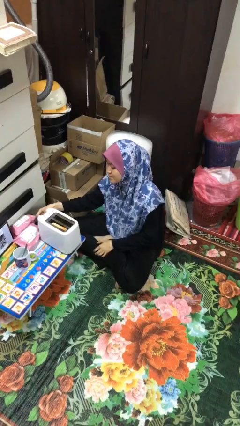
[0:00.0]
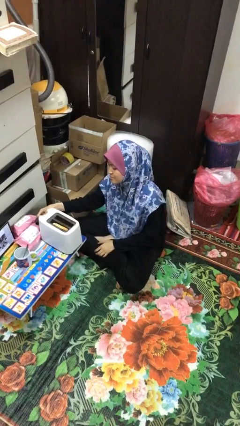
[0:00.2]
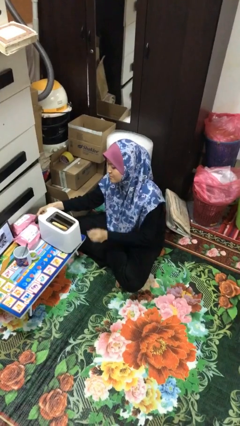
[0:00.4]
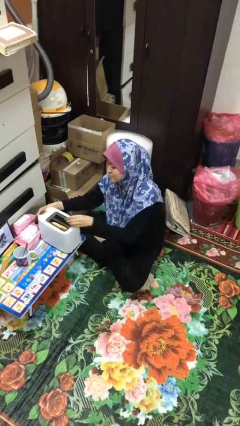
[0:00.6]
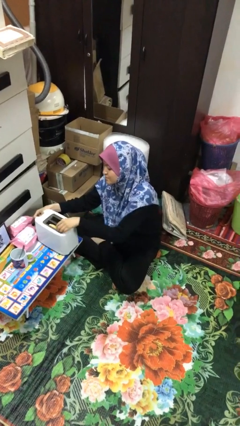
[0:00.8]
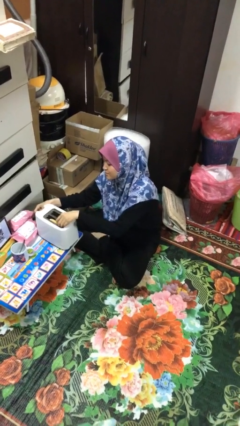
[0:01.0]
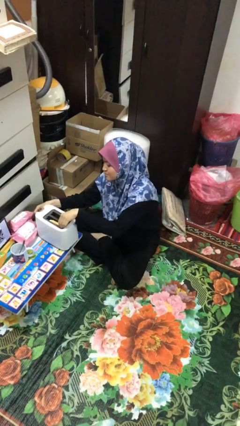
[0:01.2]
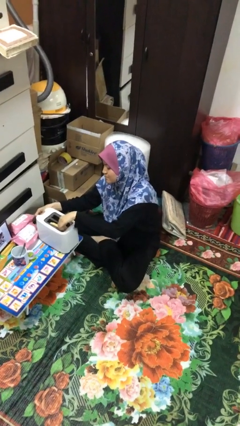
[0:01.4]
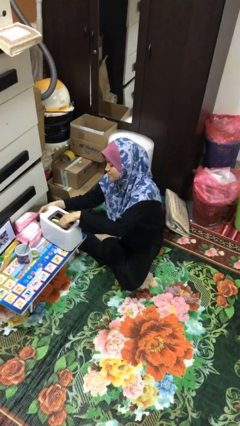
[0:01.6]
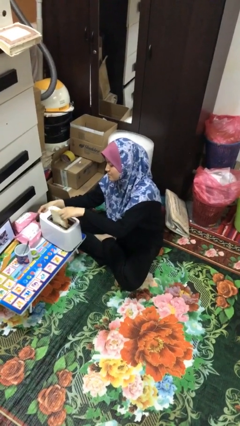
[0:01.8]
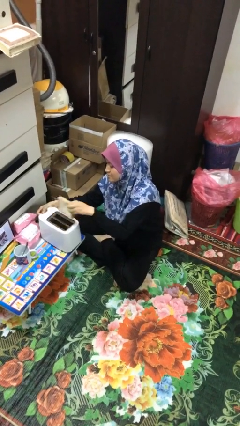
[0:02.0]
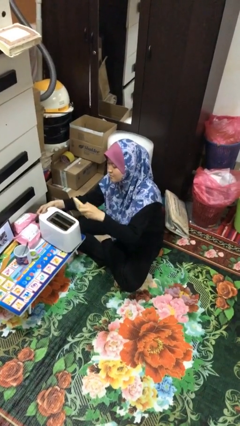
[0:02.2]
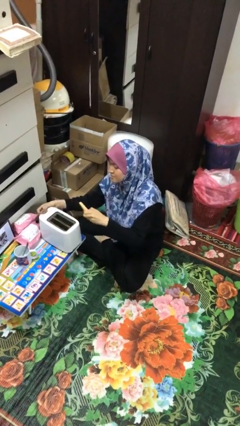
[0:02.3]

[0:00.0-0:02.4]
person takes object from toaster

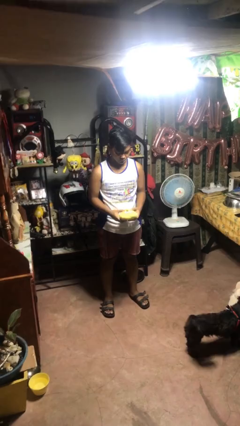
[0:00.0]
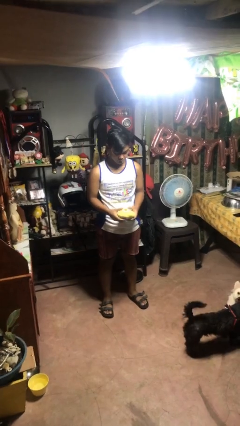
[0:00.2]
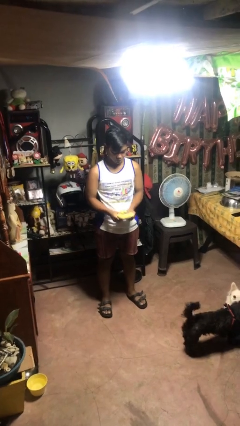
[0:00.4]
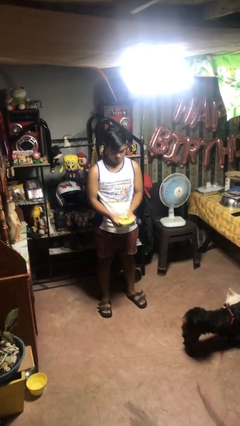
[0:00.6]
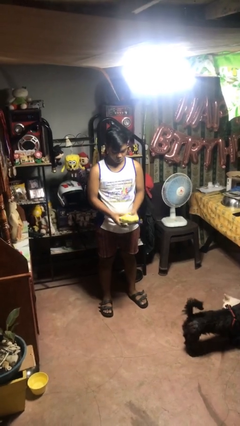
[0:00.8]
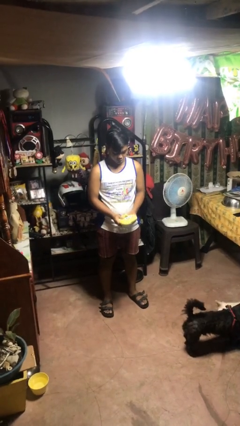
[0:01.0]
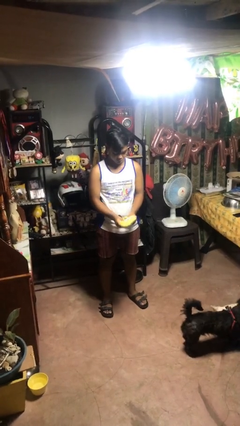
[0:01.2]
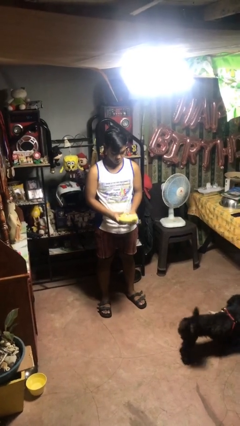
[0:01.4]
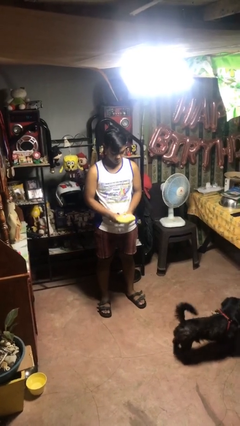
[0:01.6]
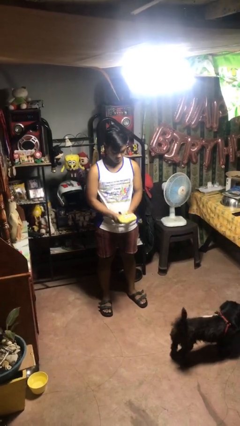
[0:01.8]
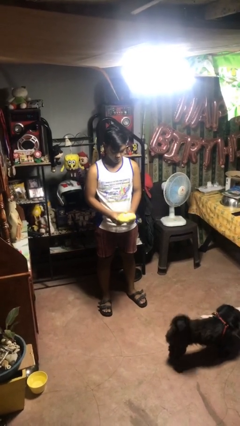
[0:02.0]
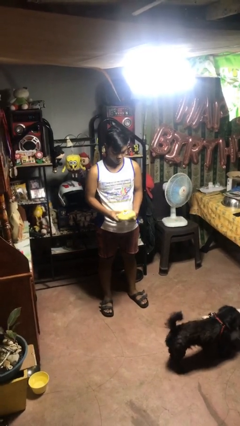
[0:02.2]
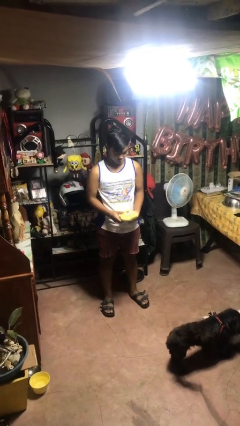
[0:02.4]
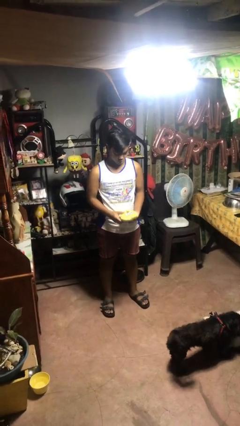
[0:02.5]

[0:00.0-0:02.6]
person squeezes object

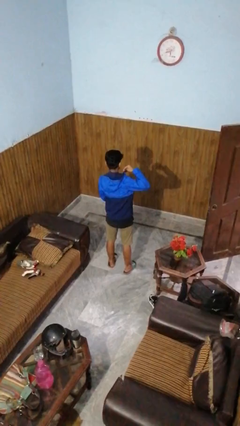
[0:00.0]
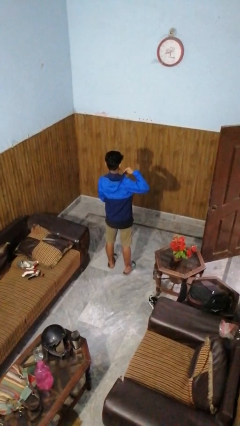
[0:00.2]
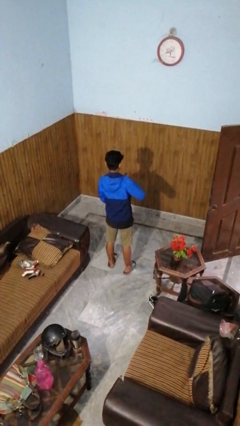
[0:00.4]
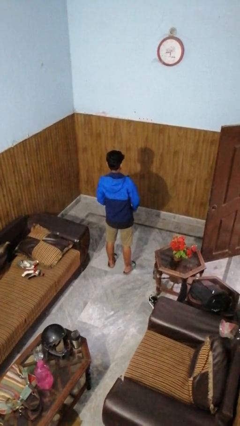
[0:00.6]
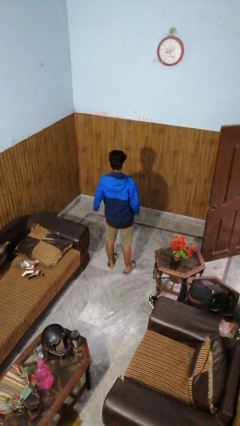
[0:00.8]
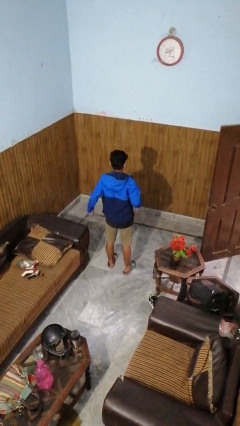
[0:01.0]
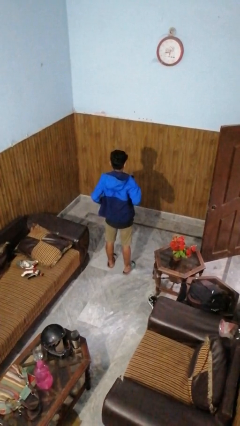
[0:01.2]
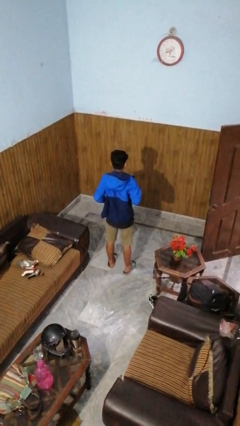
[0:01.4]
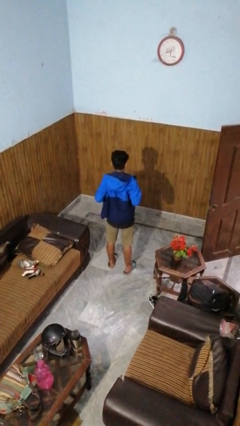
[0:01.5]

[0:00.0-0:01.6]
person unzips jacket

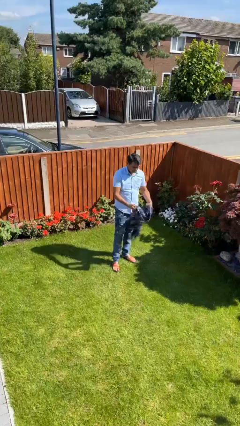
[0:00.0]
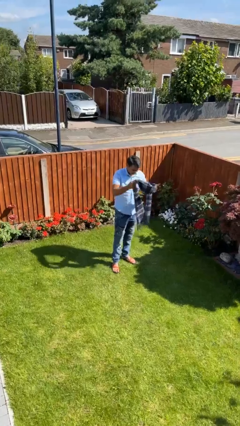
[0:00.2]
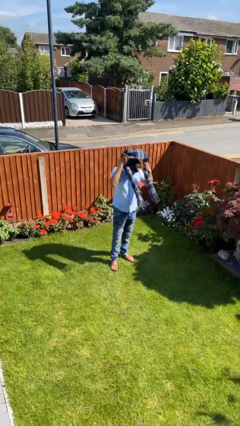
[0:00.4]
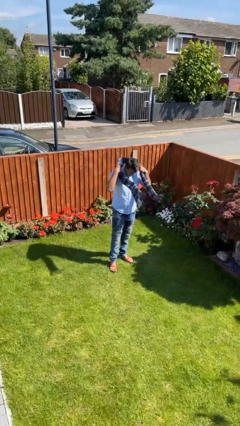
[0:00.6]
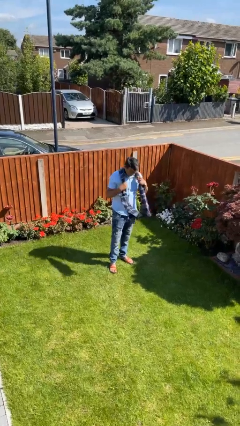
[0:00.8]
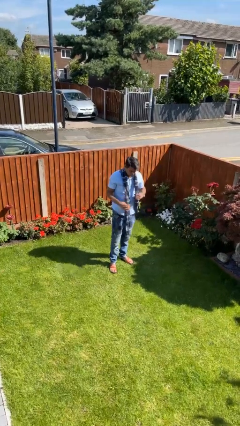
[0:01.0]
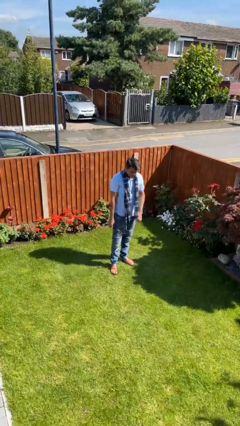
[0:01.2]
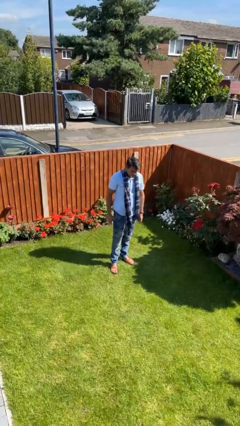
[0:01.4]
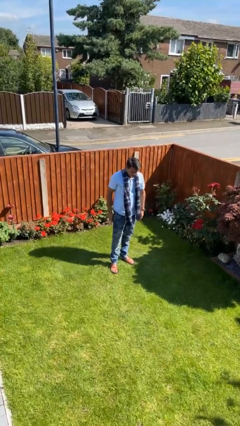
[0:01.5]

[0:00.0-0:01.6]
person puts on scarf

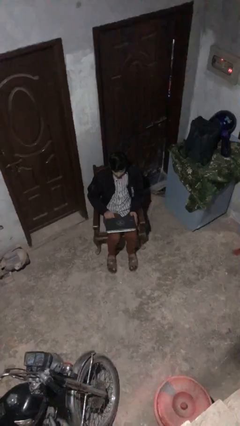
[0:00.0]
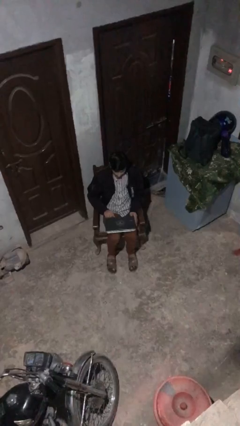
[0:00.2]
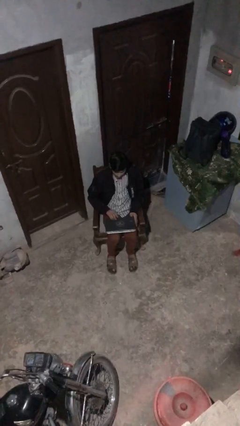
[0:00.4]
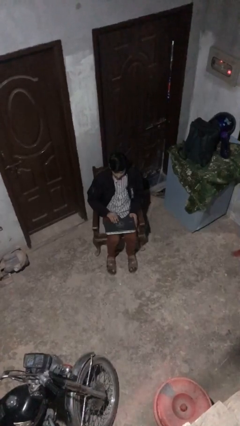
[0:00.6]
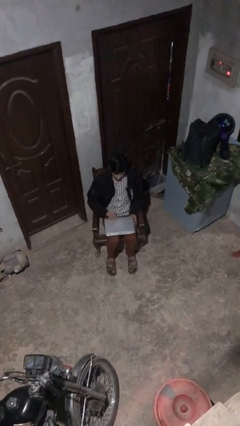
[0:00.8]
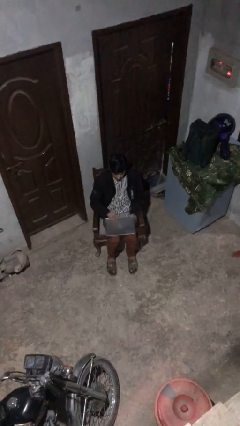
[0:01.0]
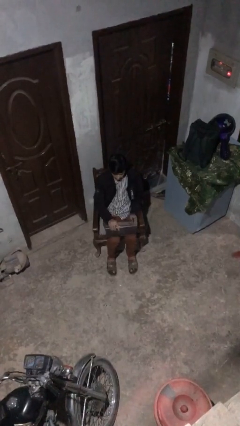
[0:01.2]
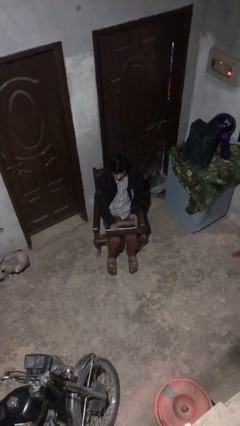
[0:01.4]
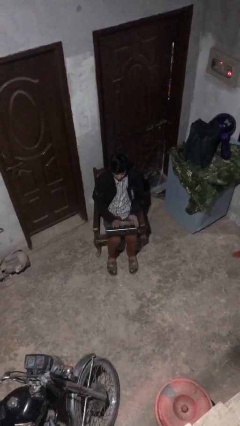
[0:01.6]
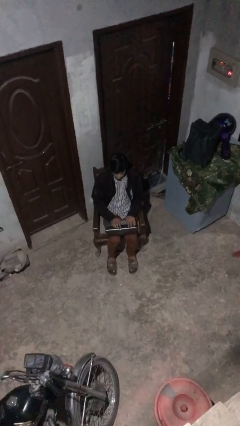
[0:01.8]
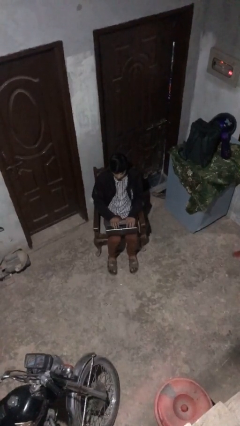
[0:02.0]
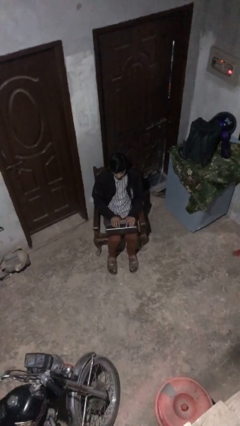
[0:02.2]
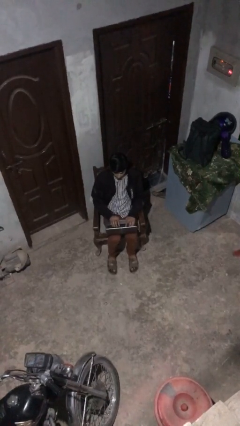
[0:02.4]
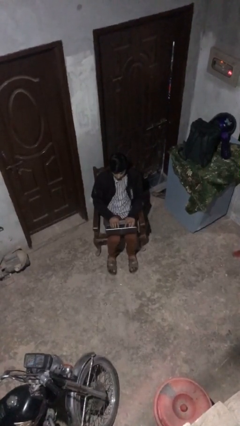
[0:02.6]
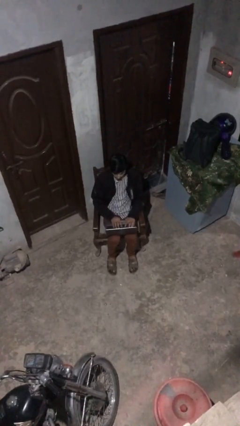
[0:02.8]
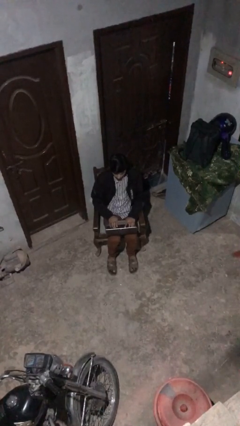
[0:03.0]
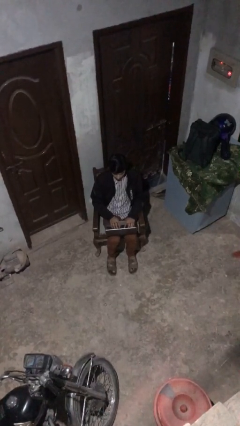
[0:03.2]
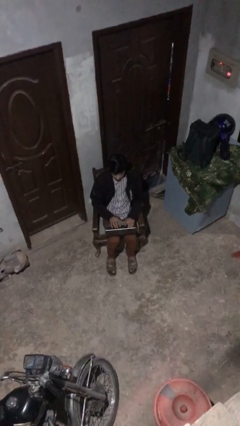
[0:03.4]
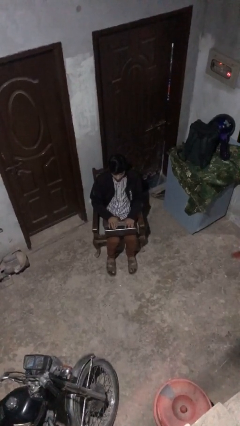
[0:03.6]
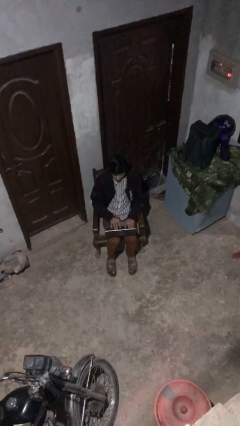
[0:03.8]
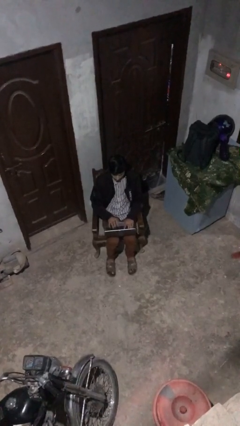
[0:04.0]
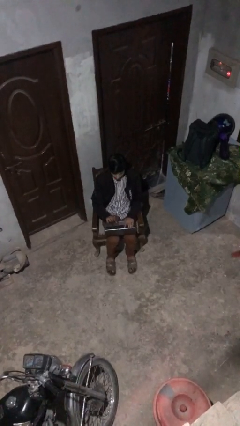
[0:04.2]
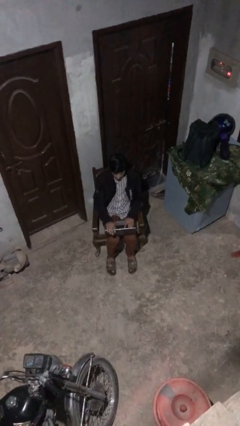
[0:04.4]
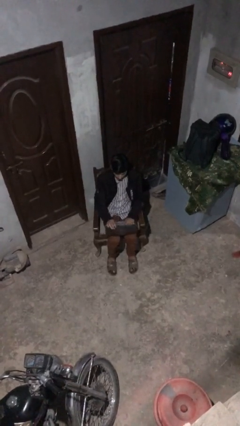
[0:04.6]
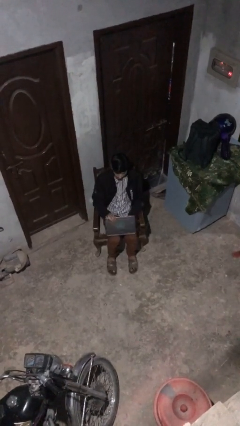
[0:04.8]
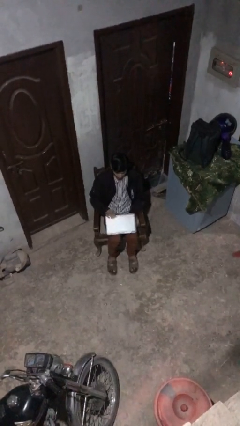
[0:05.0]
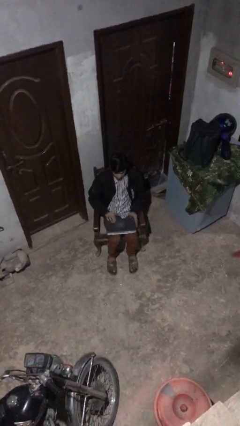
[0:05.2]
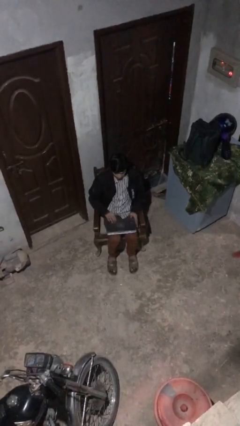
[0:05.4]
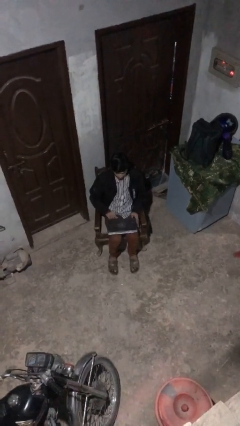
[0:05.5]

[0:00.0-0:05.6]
person interacts with laptop

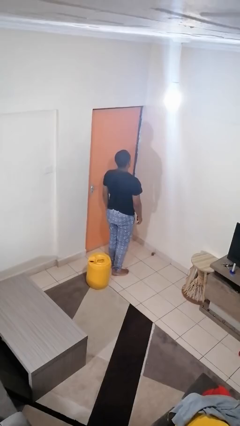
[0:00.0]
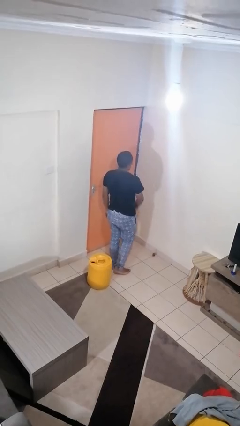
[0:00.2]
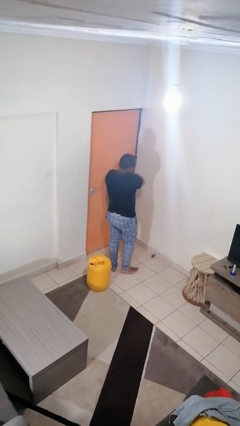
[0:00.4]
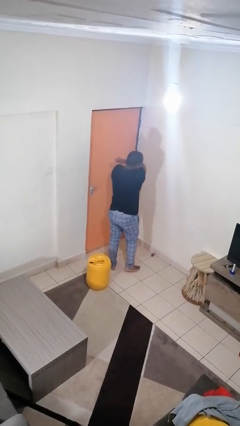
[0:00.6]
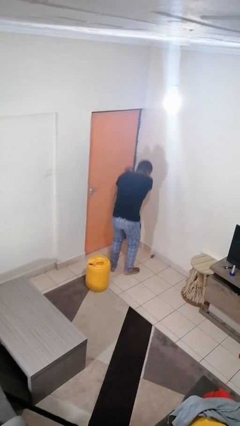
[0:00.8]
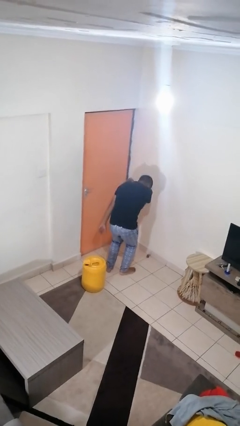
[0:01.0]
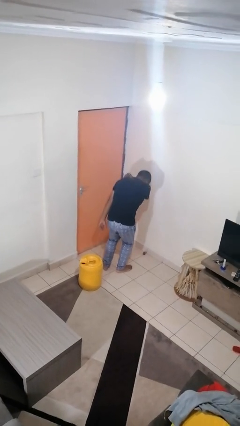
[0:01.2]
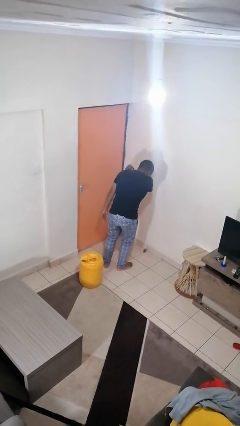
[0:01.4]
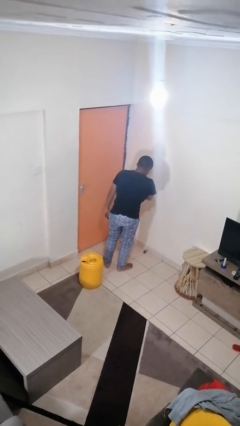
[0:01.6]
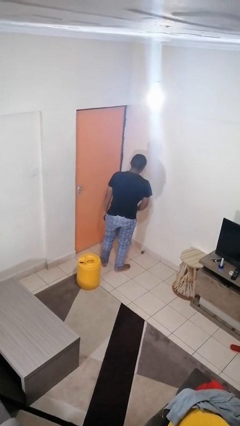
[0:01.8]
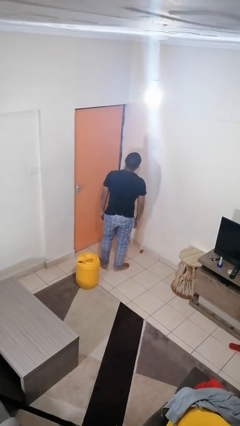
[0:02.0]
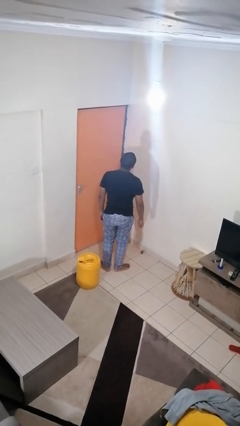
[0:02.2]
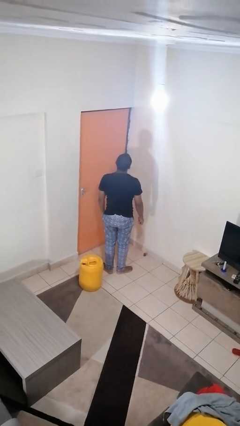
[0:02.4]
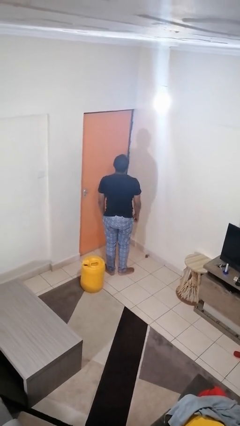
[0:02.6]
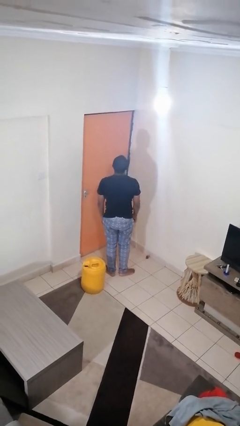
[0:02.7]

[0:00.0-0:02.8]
person sneezes into arm

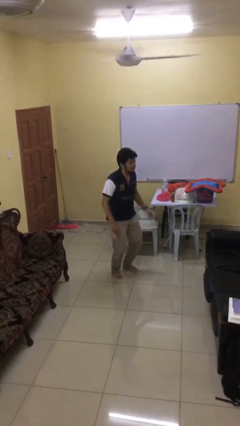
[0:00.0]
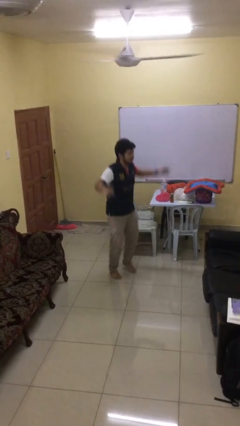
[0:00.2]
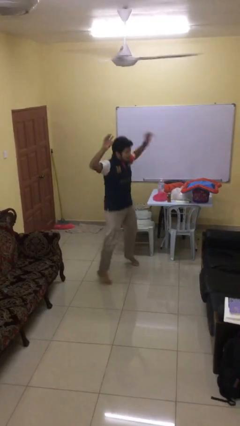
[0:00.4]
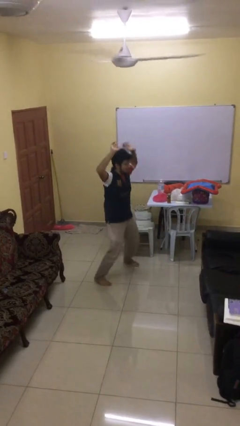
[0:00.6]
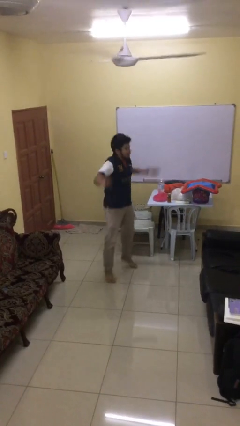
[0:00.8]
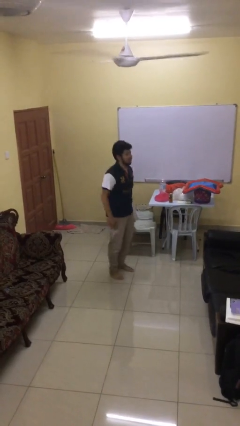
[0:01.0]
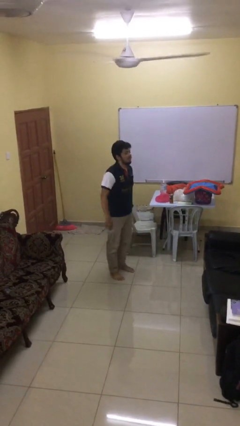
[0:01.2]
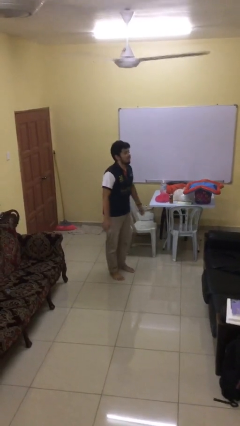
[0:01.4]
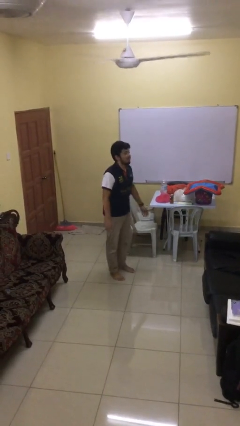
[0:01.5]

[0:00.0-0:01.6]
person exercises with jumping jacks
